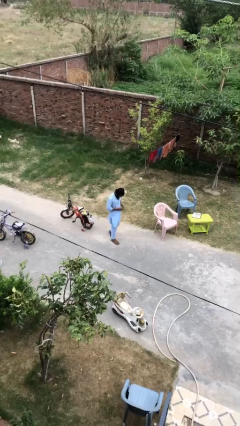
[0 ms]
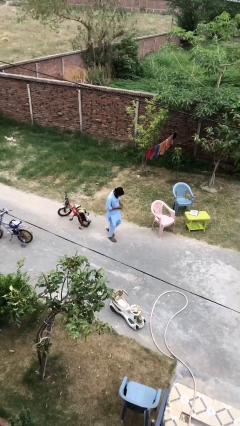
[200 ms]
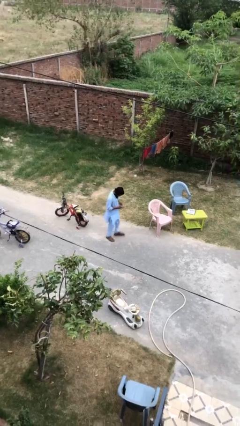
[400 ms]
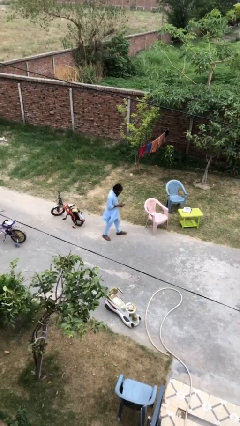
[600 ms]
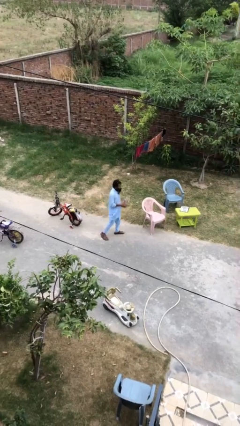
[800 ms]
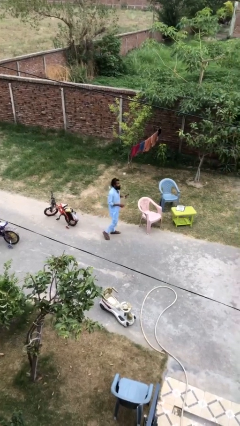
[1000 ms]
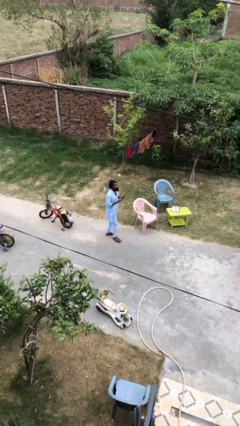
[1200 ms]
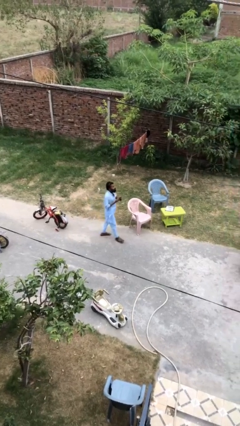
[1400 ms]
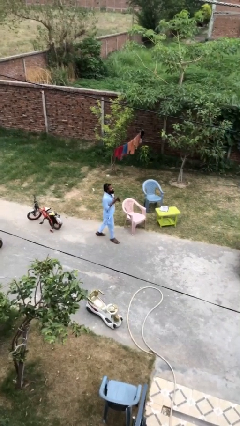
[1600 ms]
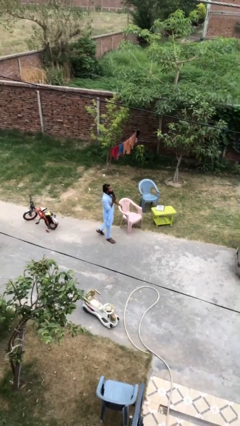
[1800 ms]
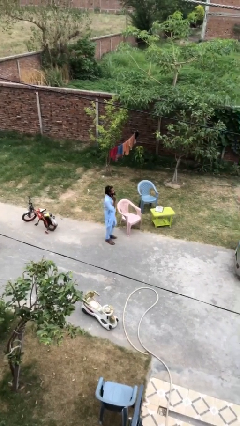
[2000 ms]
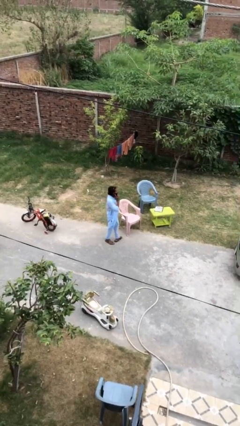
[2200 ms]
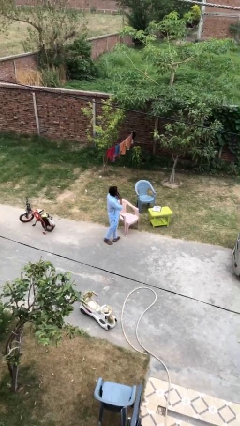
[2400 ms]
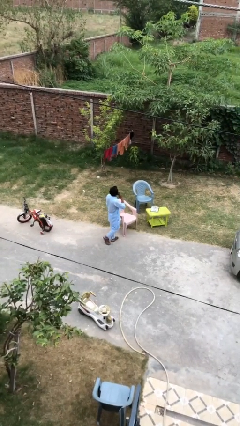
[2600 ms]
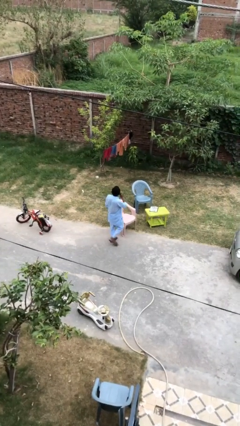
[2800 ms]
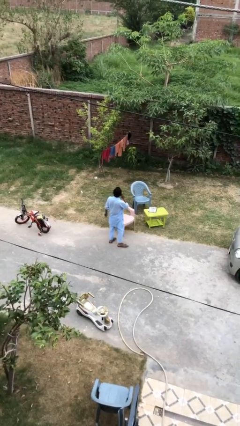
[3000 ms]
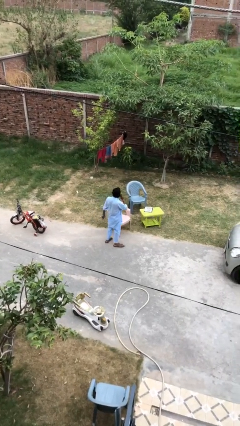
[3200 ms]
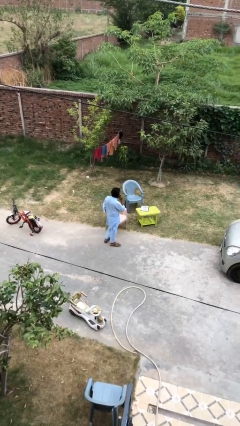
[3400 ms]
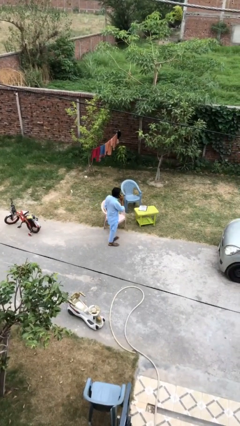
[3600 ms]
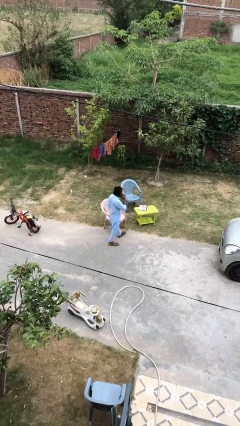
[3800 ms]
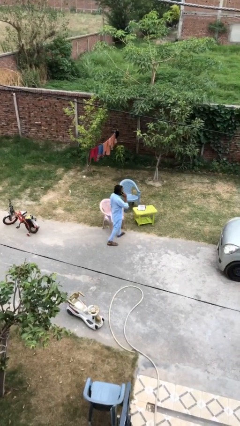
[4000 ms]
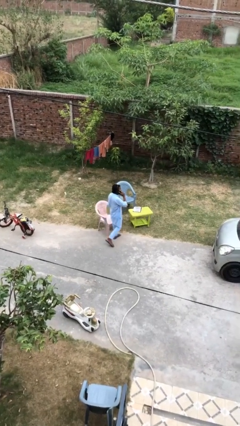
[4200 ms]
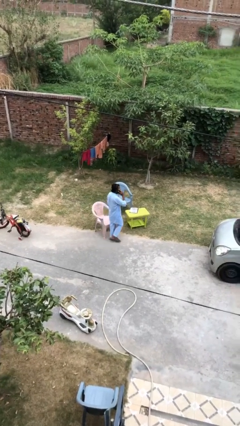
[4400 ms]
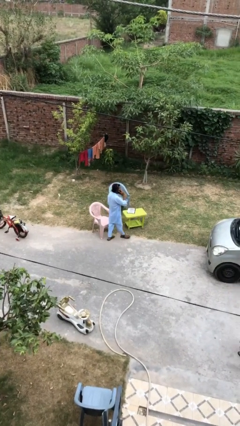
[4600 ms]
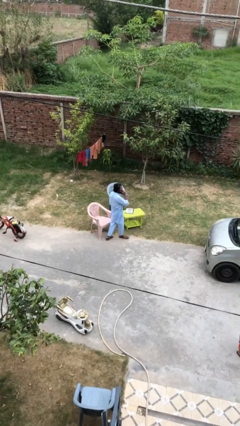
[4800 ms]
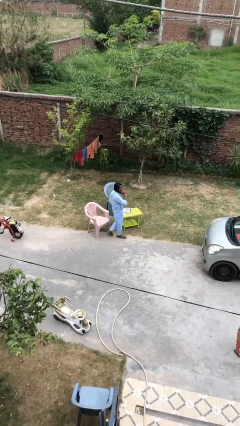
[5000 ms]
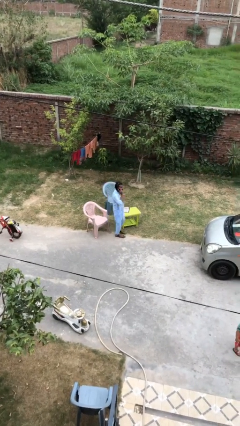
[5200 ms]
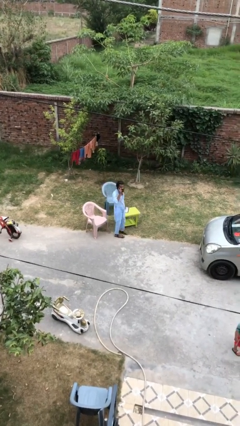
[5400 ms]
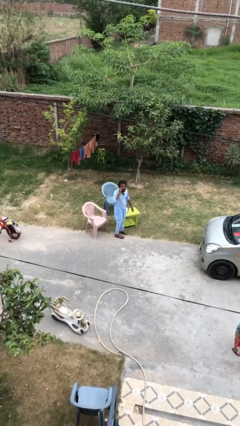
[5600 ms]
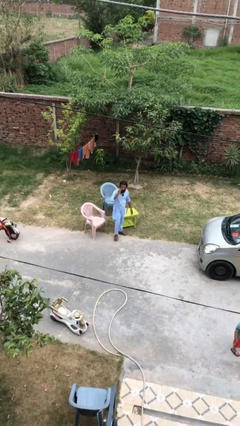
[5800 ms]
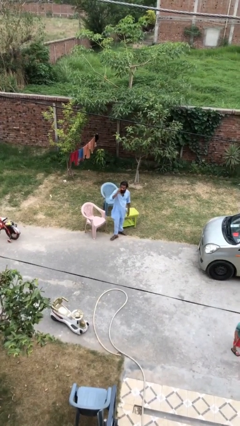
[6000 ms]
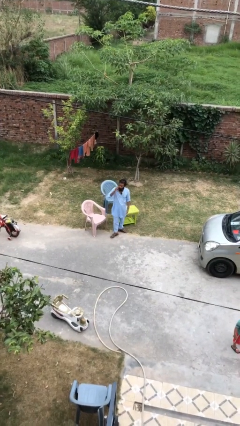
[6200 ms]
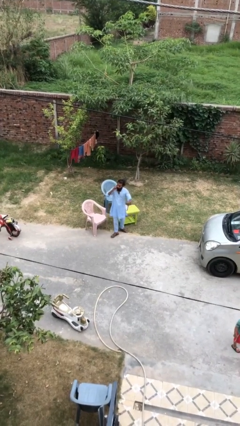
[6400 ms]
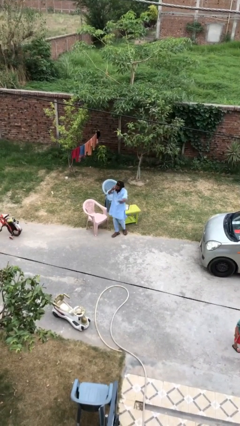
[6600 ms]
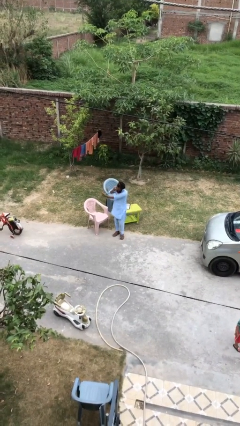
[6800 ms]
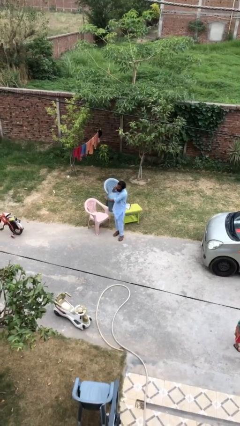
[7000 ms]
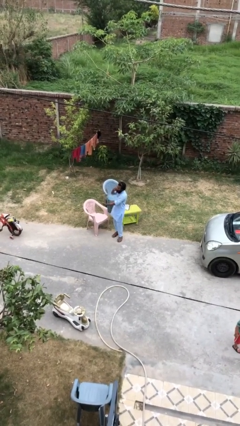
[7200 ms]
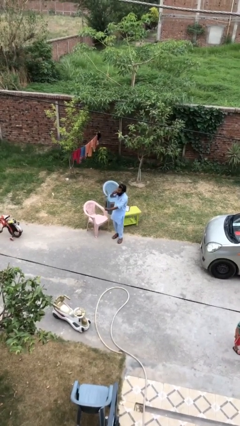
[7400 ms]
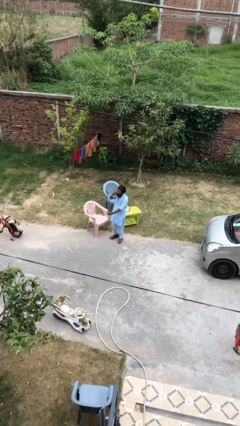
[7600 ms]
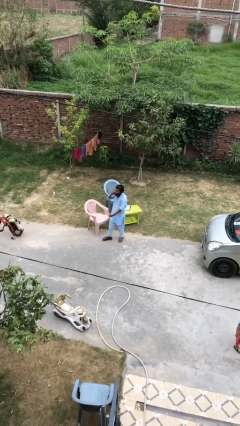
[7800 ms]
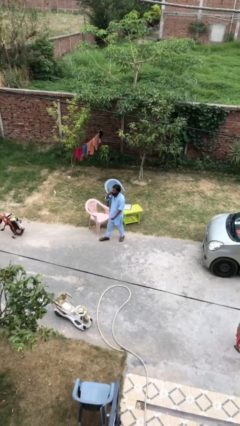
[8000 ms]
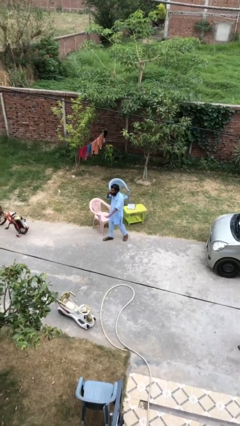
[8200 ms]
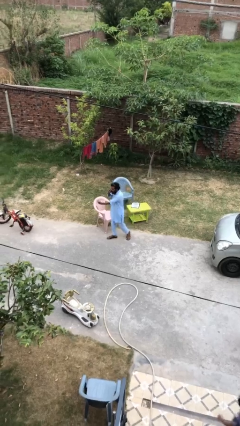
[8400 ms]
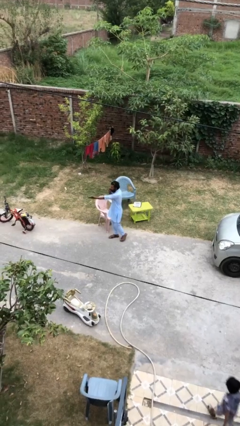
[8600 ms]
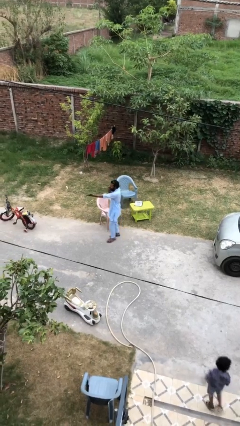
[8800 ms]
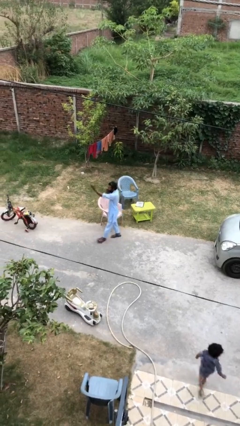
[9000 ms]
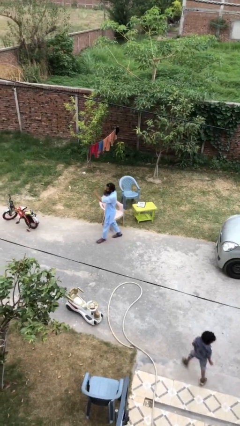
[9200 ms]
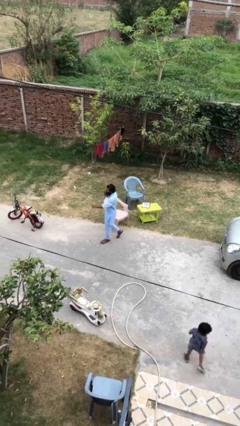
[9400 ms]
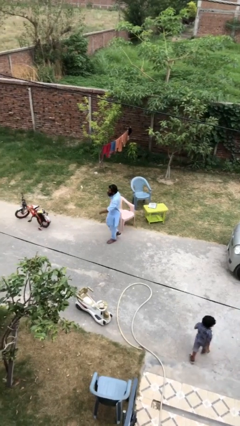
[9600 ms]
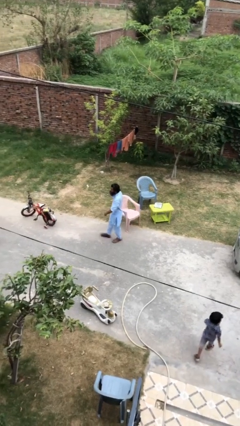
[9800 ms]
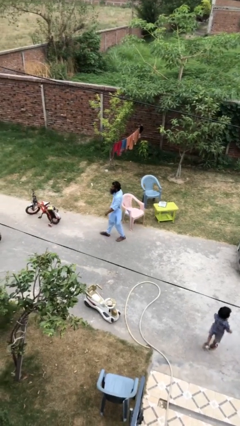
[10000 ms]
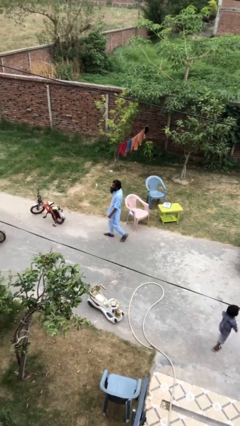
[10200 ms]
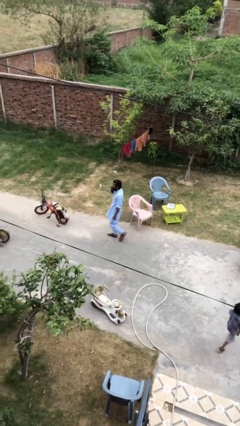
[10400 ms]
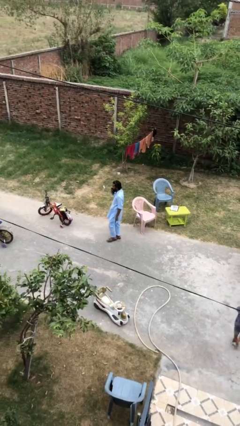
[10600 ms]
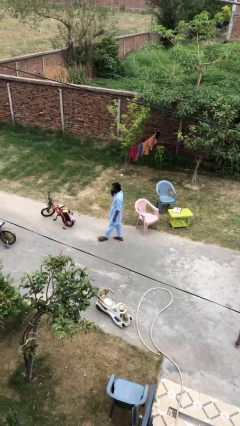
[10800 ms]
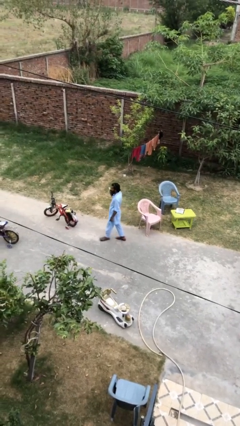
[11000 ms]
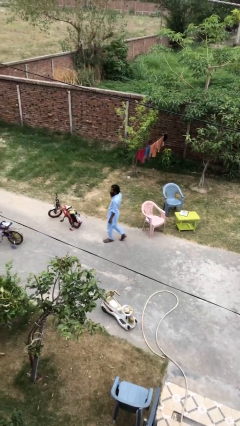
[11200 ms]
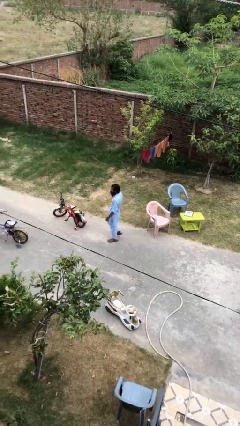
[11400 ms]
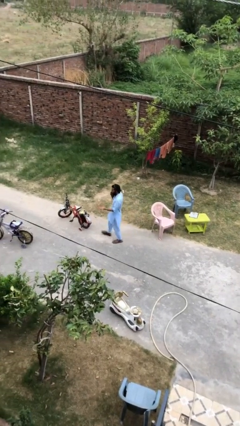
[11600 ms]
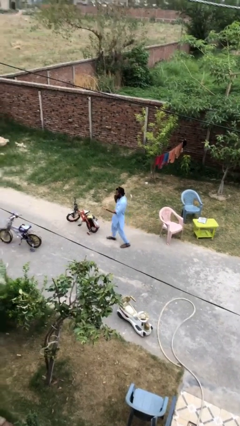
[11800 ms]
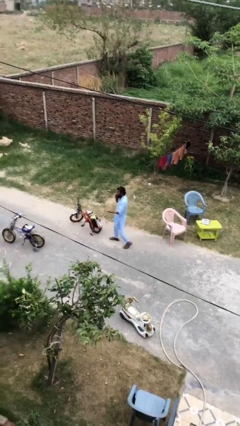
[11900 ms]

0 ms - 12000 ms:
person talks on phone

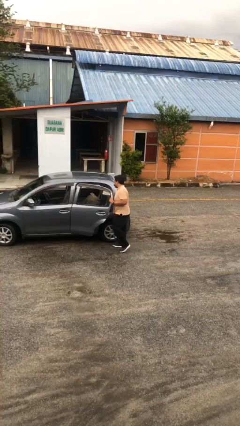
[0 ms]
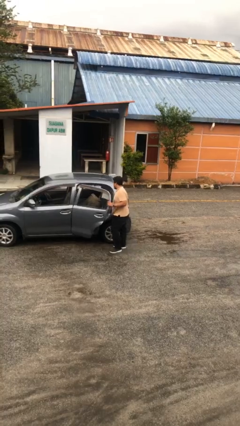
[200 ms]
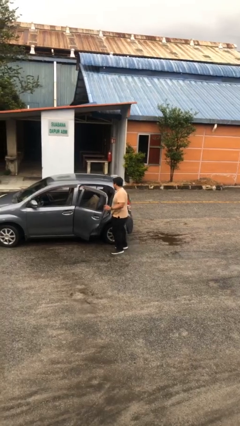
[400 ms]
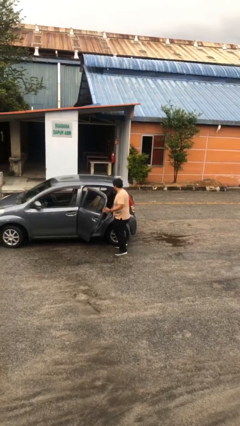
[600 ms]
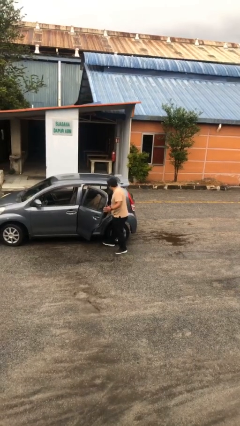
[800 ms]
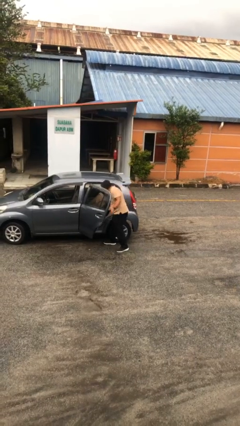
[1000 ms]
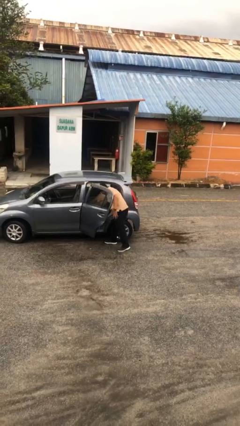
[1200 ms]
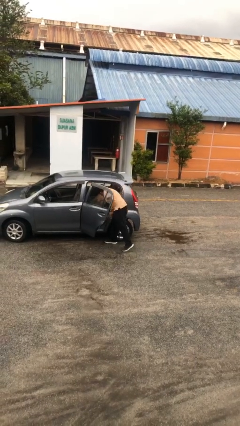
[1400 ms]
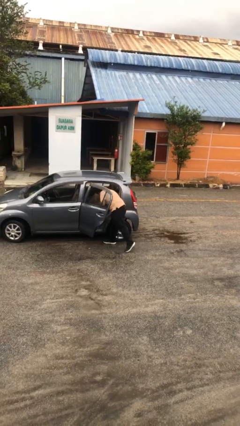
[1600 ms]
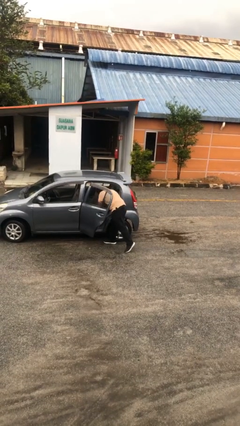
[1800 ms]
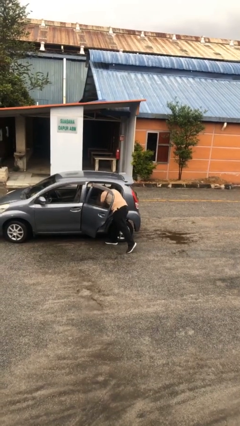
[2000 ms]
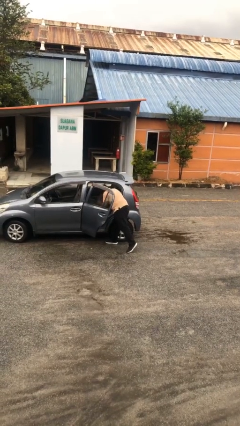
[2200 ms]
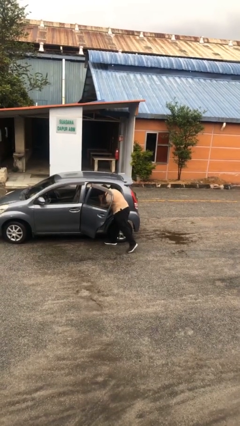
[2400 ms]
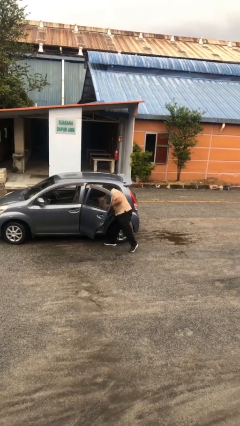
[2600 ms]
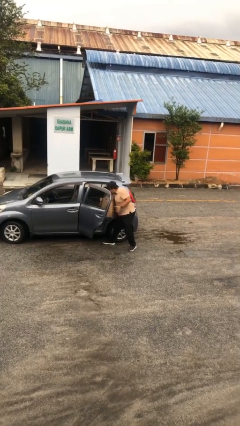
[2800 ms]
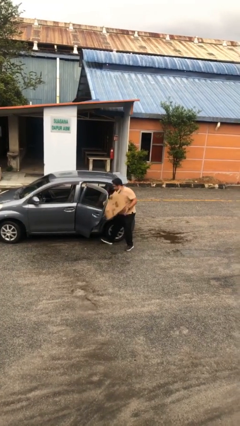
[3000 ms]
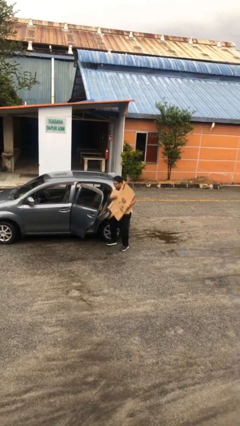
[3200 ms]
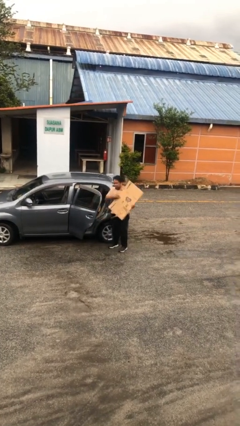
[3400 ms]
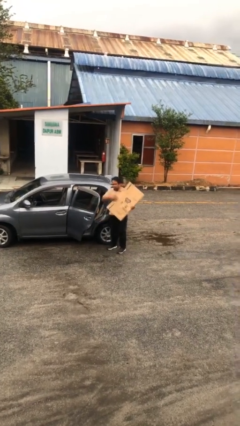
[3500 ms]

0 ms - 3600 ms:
person unloads car

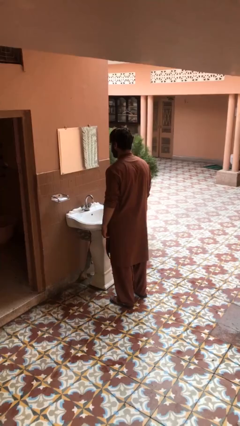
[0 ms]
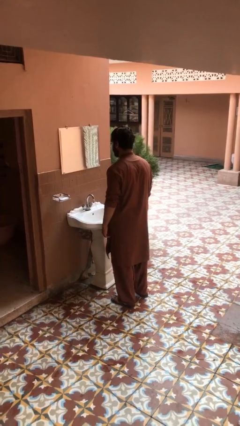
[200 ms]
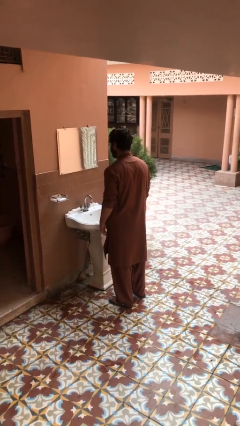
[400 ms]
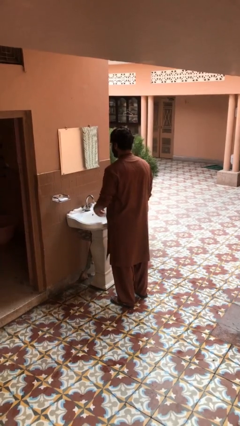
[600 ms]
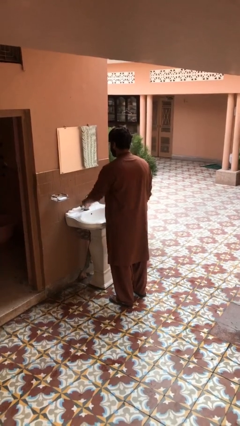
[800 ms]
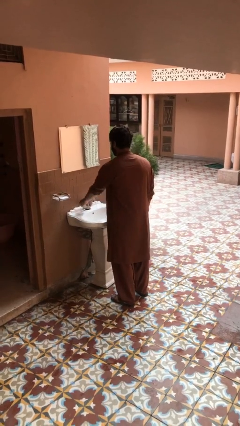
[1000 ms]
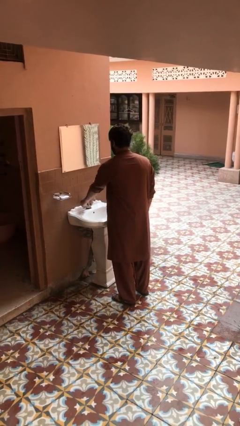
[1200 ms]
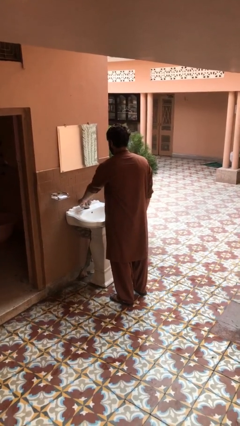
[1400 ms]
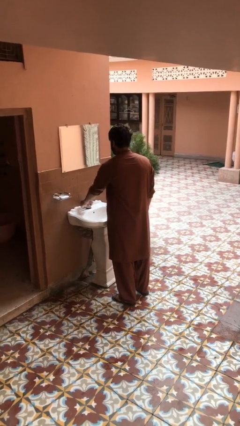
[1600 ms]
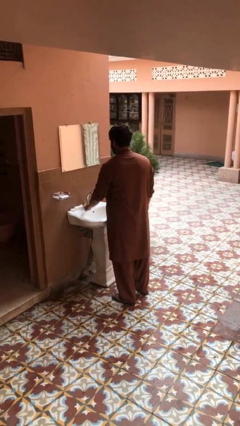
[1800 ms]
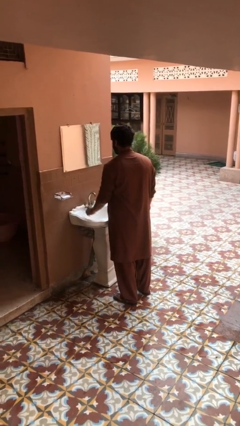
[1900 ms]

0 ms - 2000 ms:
person turns off faucet

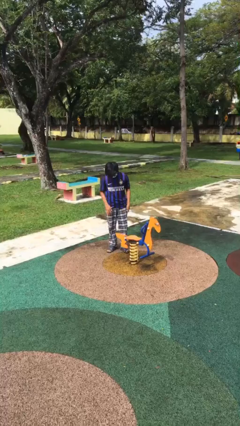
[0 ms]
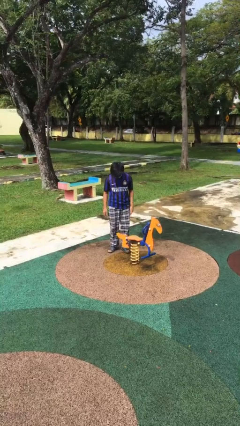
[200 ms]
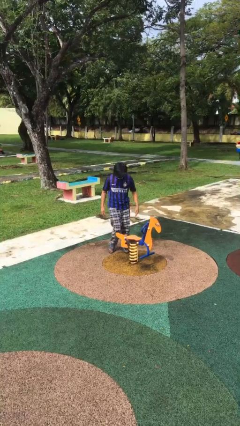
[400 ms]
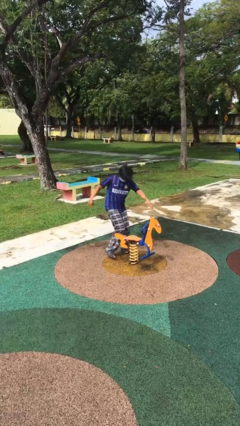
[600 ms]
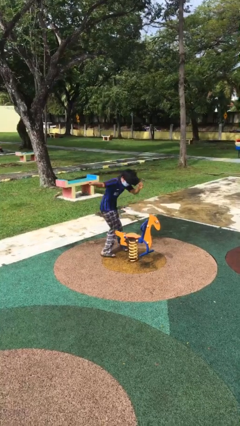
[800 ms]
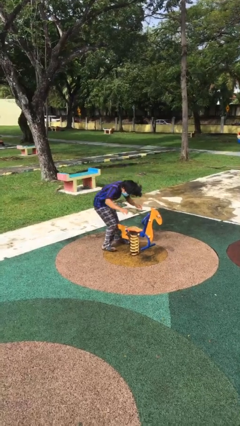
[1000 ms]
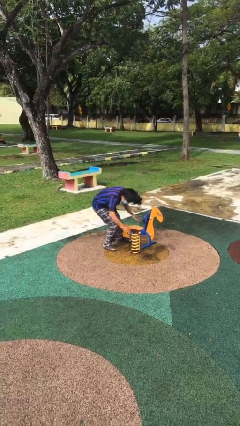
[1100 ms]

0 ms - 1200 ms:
person trips on object on floor
